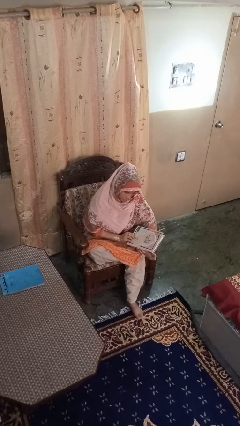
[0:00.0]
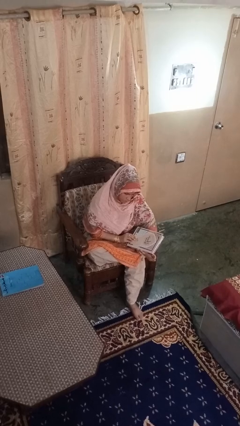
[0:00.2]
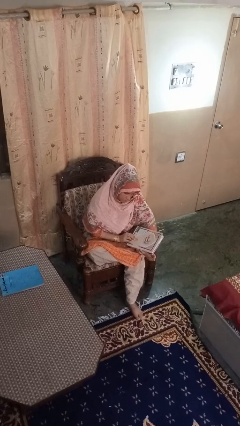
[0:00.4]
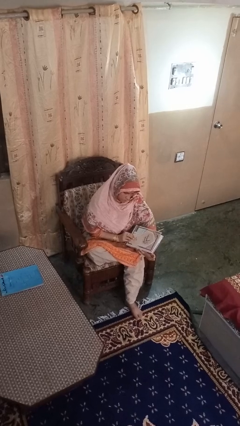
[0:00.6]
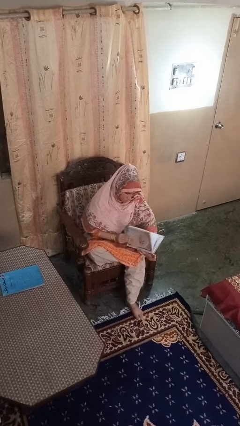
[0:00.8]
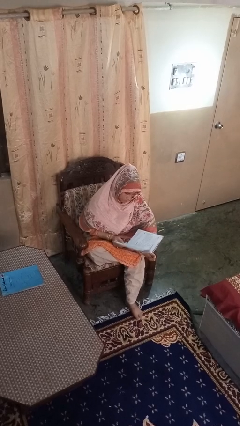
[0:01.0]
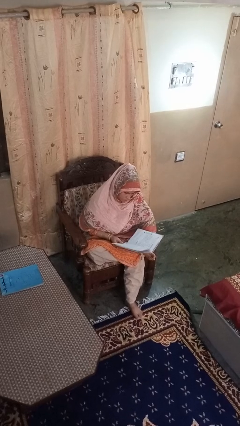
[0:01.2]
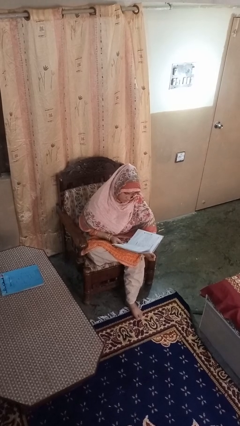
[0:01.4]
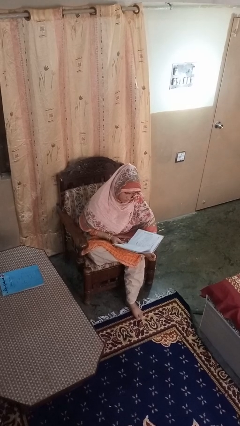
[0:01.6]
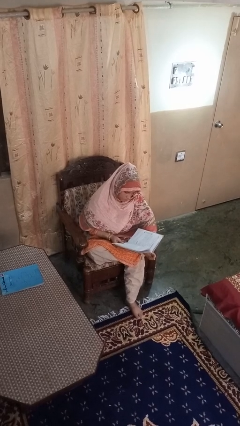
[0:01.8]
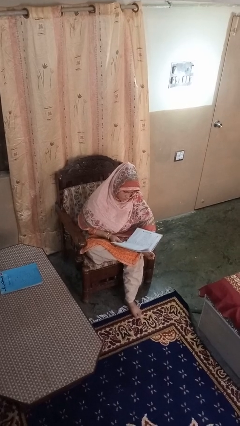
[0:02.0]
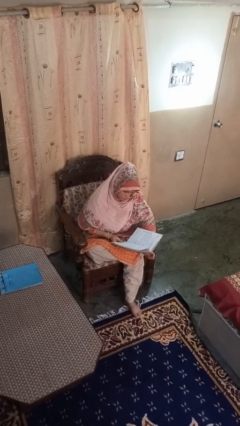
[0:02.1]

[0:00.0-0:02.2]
person reads book

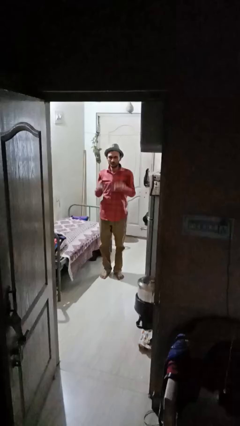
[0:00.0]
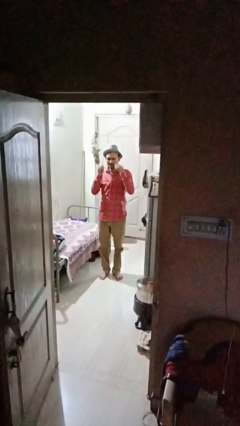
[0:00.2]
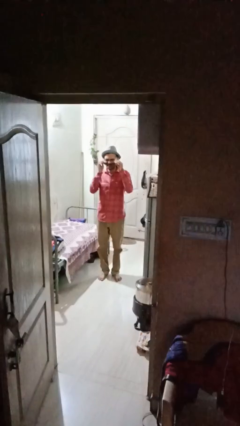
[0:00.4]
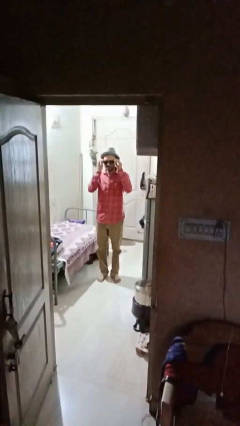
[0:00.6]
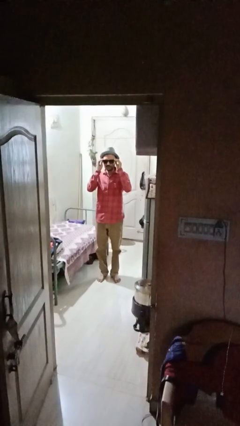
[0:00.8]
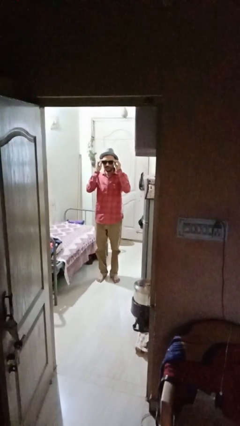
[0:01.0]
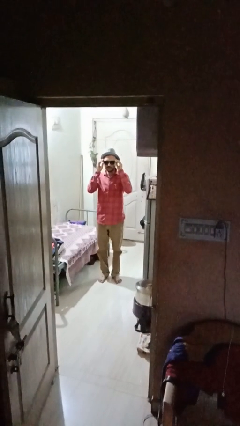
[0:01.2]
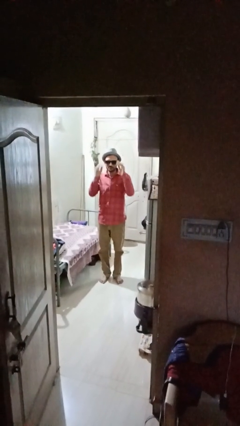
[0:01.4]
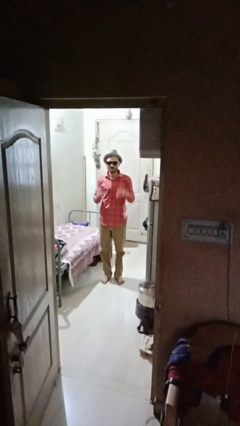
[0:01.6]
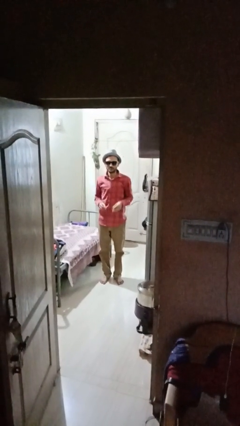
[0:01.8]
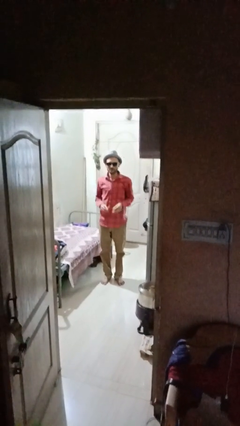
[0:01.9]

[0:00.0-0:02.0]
person puts on sunglasses

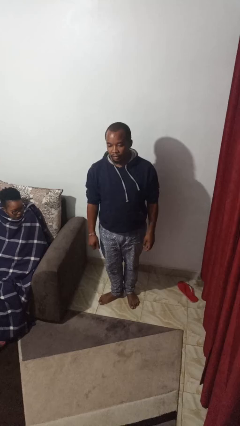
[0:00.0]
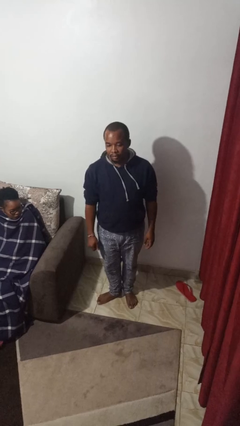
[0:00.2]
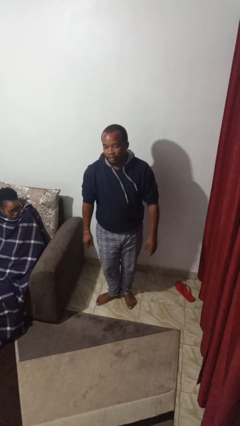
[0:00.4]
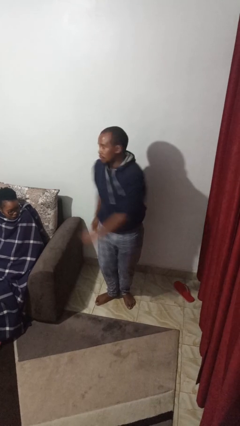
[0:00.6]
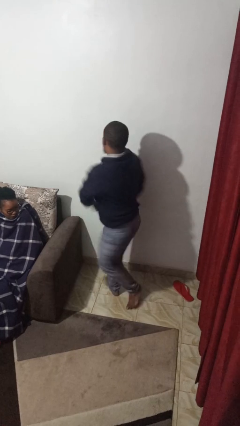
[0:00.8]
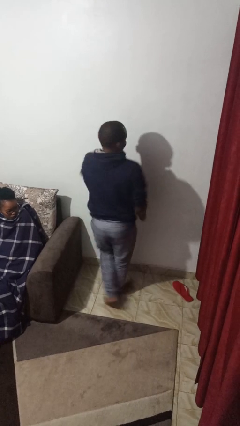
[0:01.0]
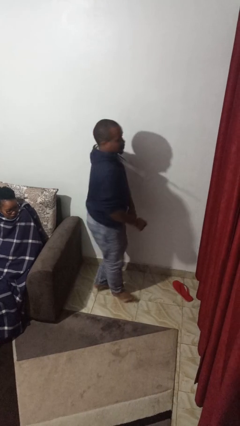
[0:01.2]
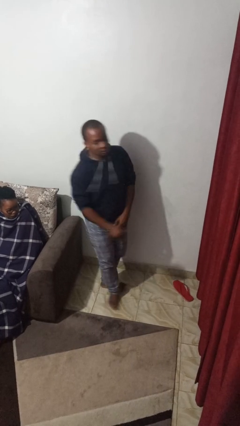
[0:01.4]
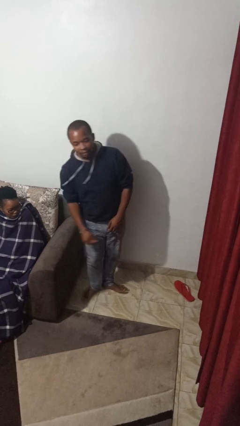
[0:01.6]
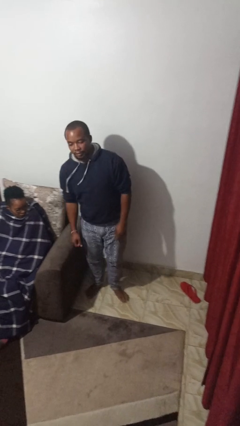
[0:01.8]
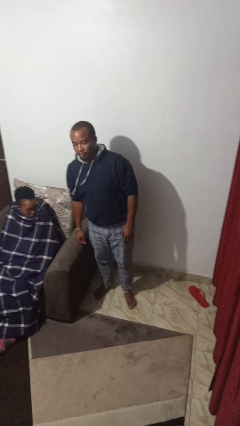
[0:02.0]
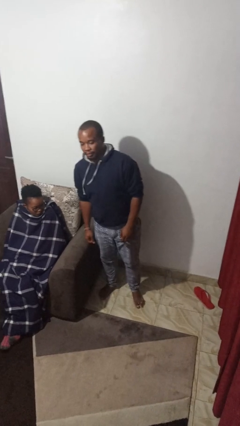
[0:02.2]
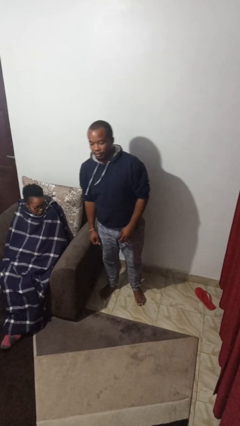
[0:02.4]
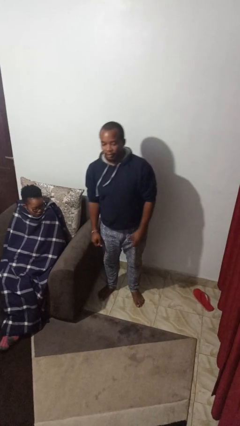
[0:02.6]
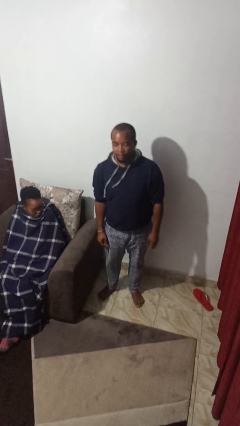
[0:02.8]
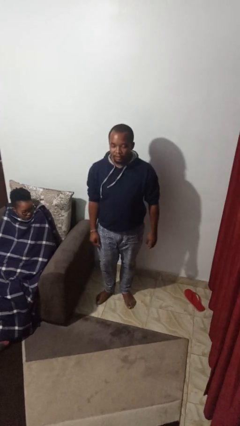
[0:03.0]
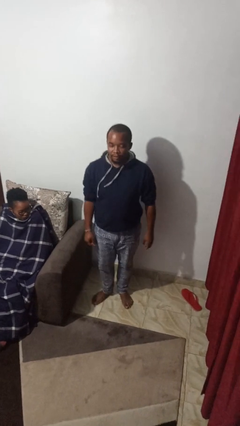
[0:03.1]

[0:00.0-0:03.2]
person twirls

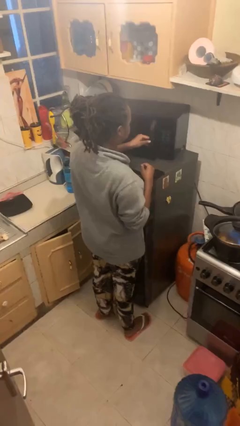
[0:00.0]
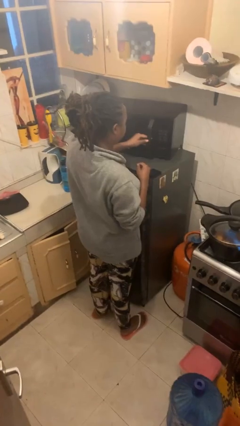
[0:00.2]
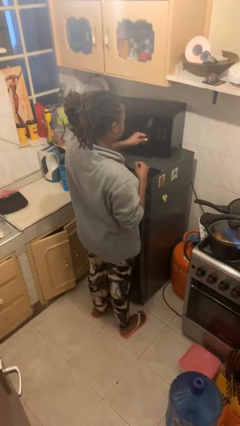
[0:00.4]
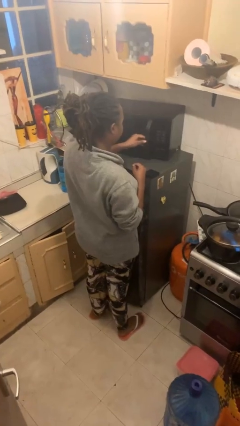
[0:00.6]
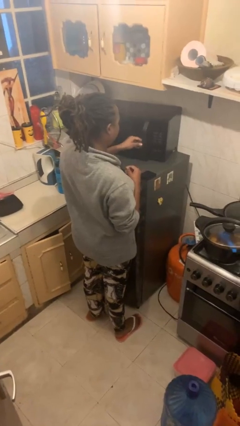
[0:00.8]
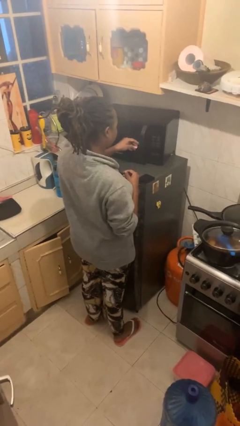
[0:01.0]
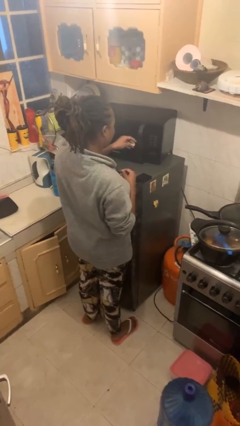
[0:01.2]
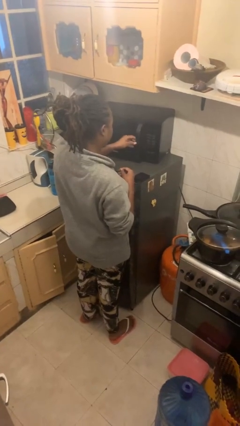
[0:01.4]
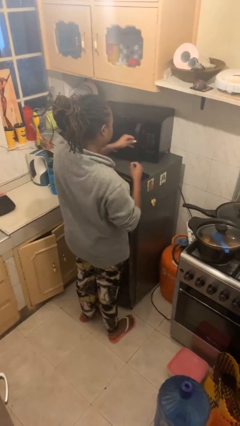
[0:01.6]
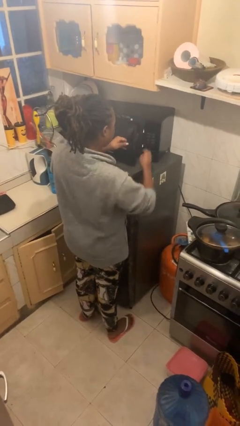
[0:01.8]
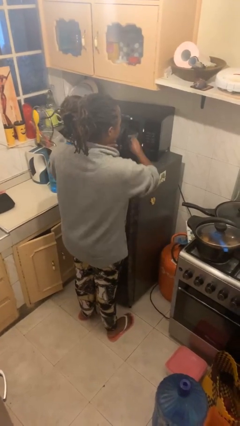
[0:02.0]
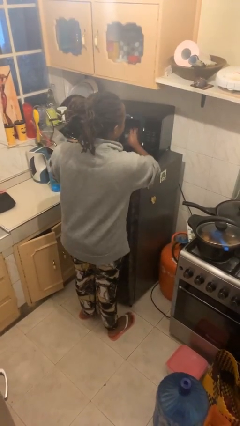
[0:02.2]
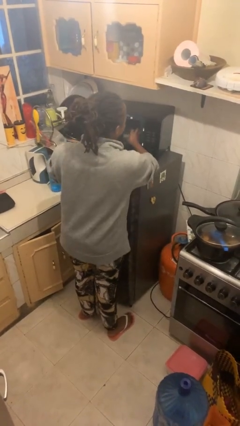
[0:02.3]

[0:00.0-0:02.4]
person closes microwave

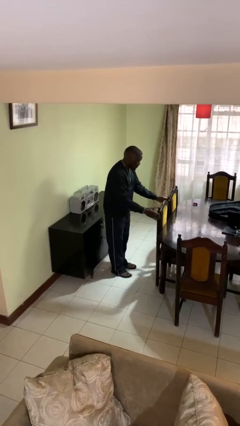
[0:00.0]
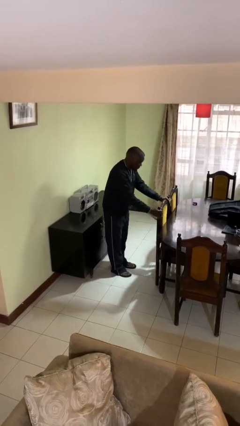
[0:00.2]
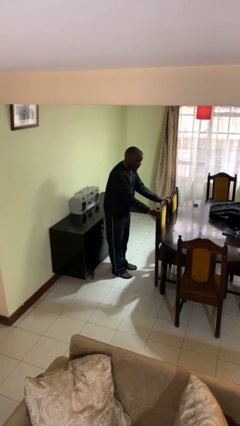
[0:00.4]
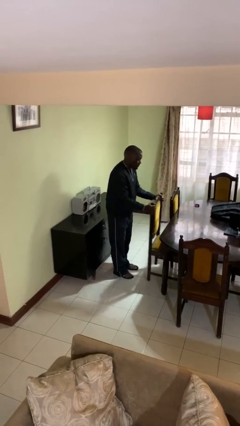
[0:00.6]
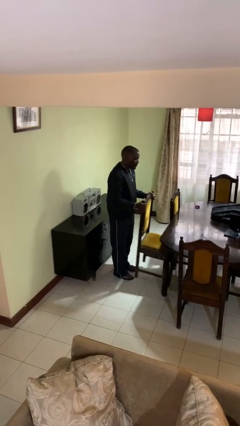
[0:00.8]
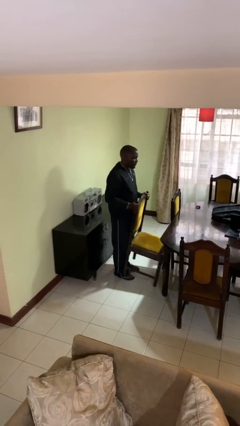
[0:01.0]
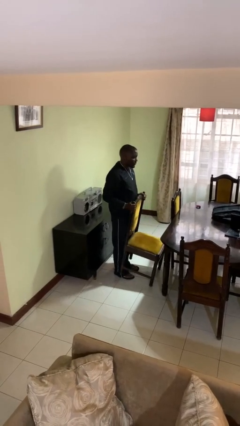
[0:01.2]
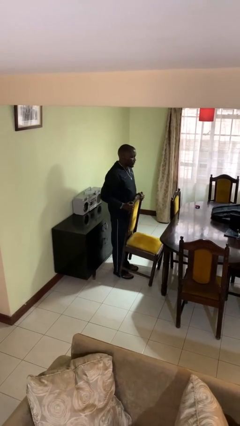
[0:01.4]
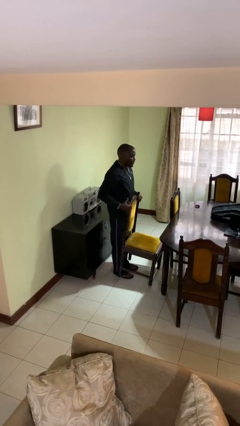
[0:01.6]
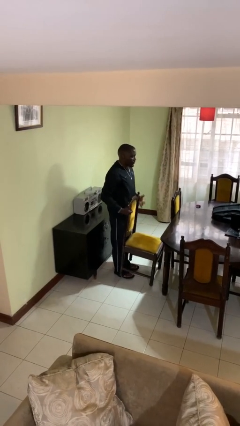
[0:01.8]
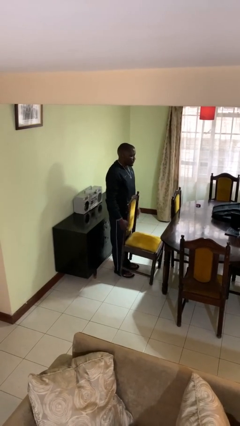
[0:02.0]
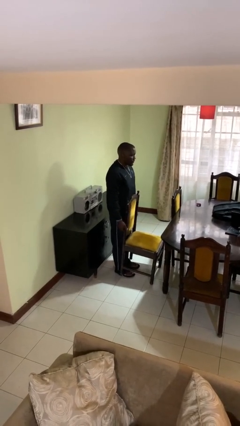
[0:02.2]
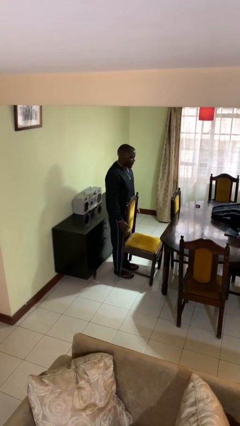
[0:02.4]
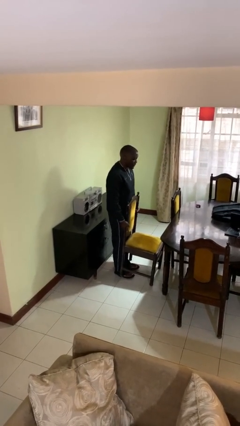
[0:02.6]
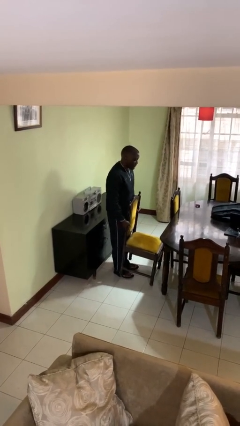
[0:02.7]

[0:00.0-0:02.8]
person pulls out chair

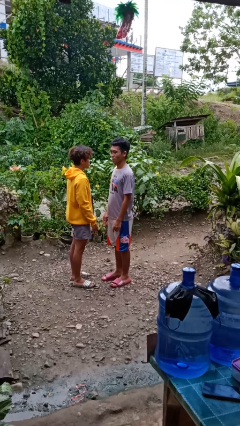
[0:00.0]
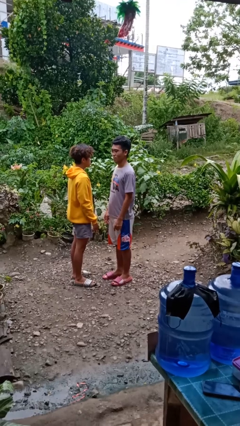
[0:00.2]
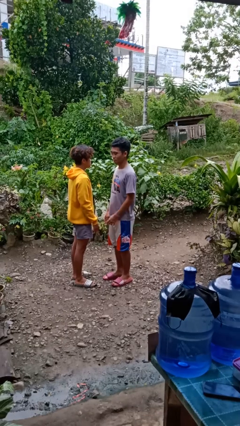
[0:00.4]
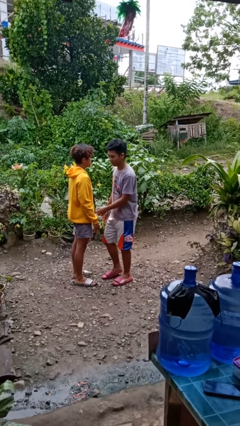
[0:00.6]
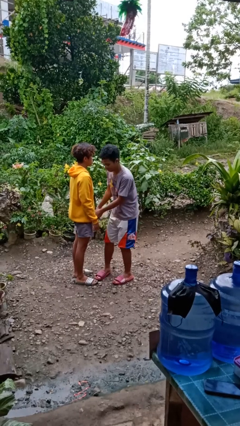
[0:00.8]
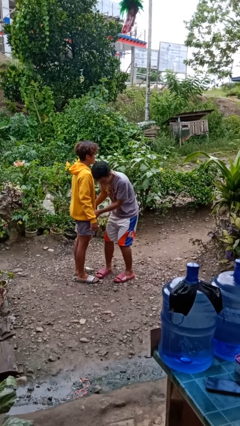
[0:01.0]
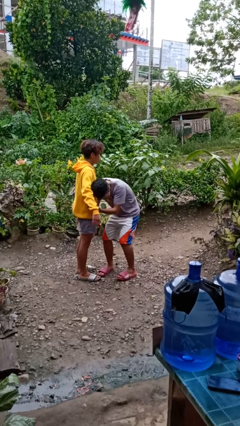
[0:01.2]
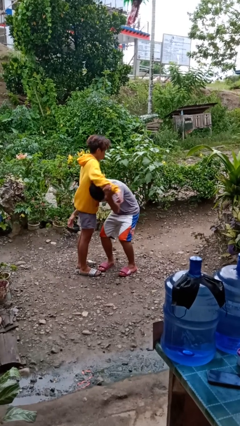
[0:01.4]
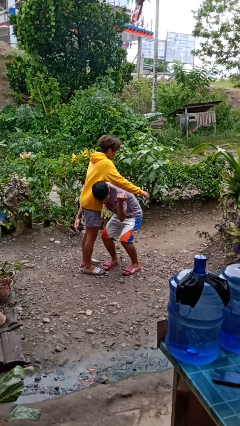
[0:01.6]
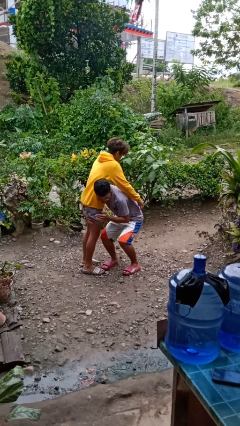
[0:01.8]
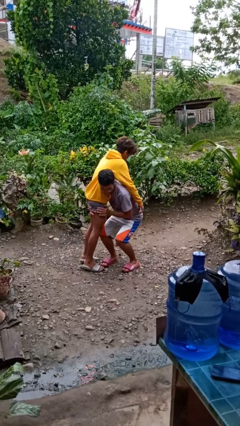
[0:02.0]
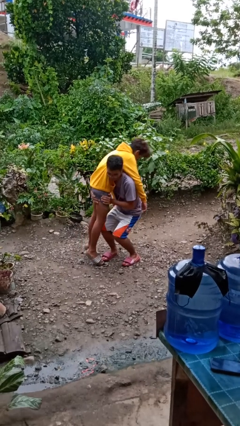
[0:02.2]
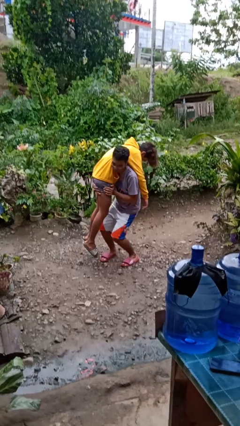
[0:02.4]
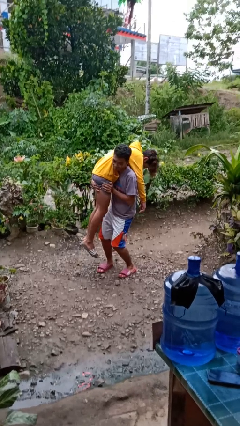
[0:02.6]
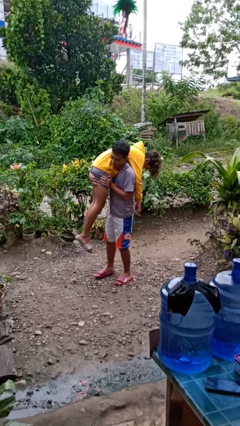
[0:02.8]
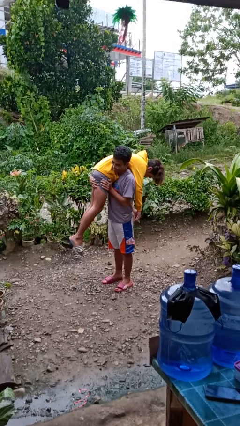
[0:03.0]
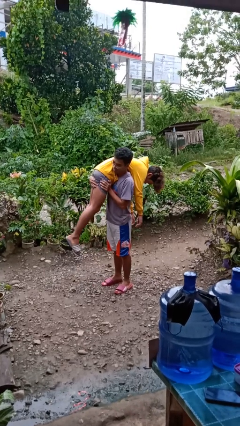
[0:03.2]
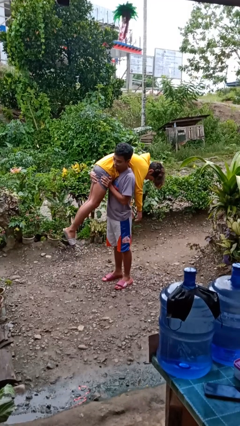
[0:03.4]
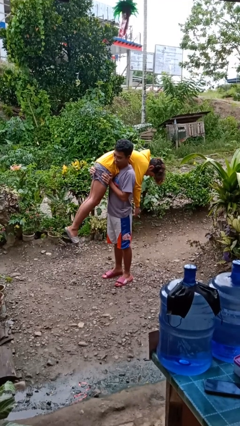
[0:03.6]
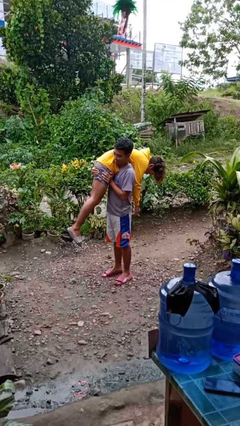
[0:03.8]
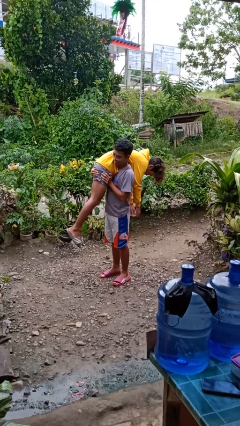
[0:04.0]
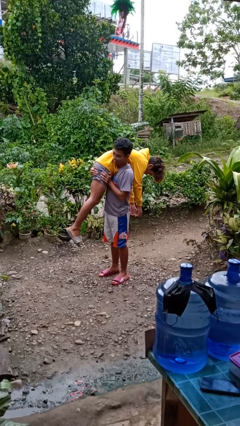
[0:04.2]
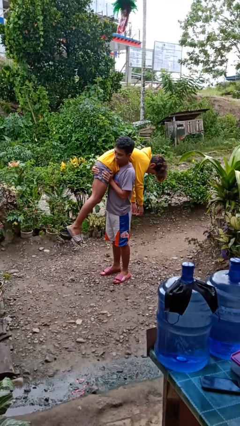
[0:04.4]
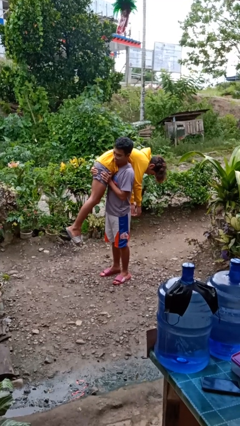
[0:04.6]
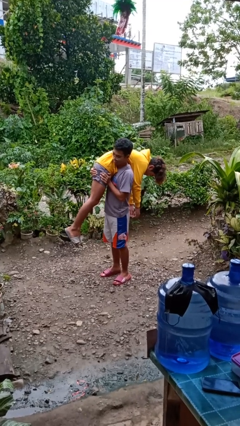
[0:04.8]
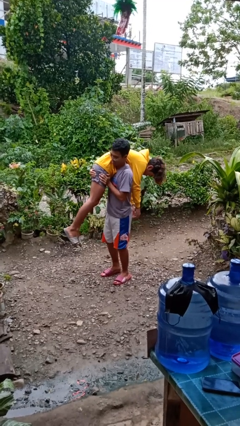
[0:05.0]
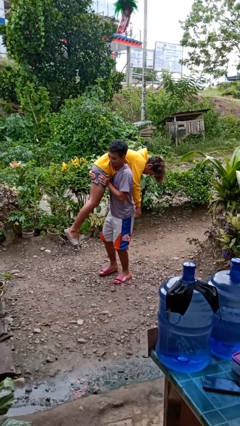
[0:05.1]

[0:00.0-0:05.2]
person carries person over shoulder
